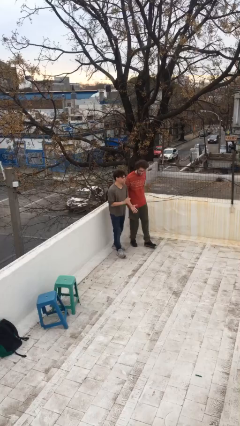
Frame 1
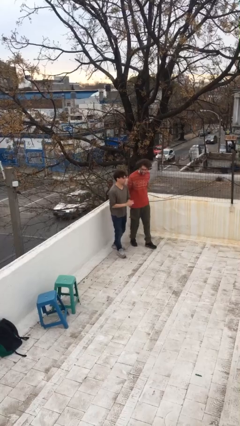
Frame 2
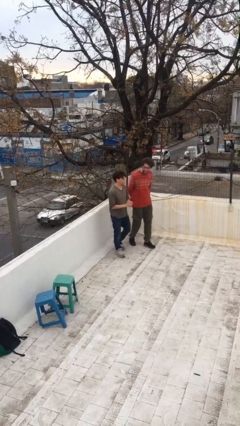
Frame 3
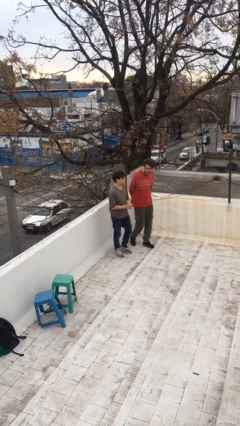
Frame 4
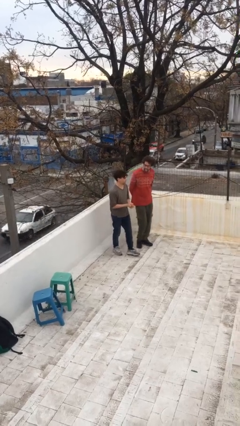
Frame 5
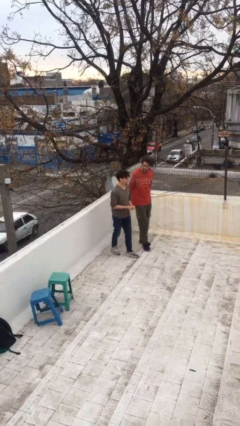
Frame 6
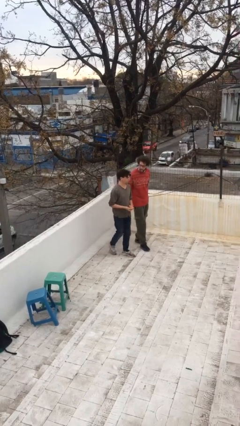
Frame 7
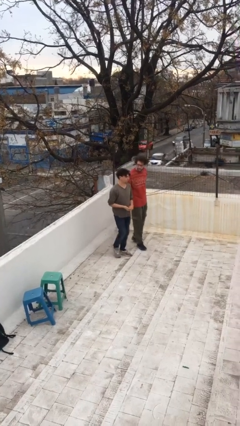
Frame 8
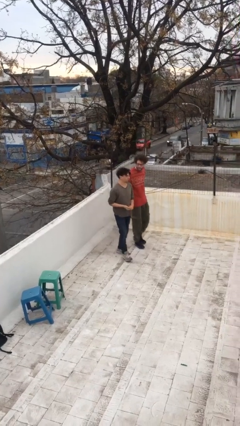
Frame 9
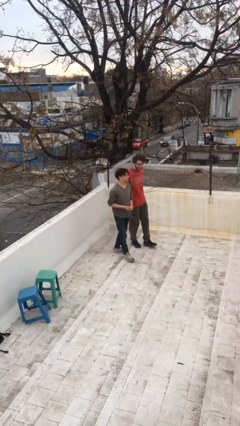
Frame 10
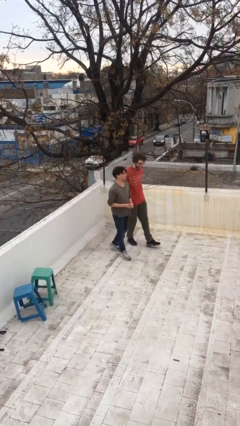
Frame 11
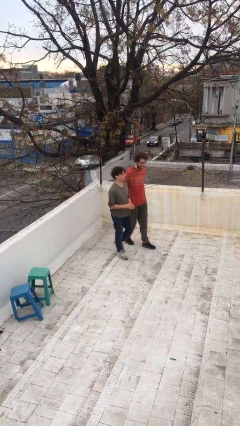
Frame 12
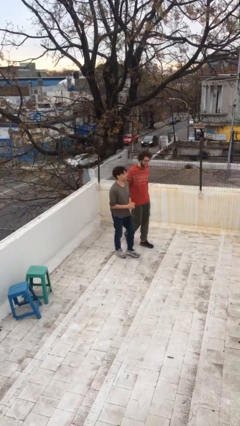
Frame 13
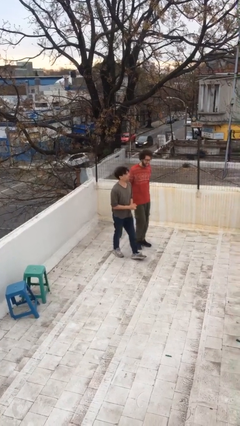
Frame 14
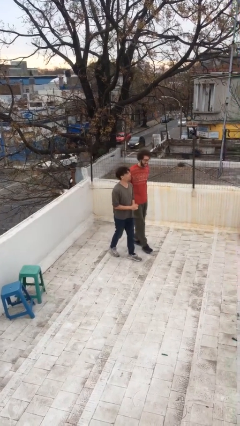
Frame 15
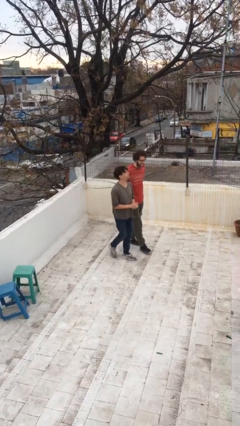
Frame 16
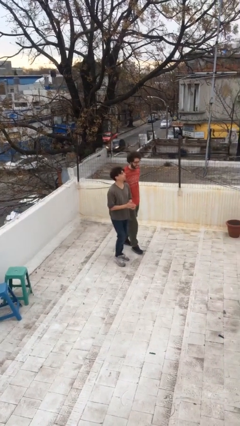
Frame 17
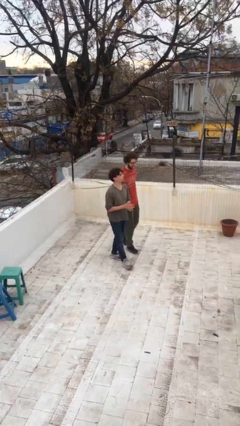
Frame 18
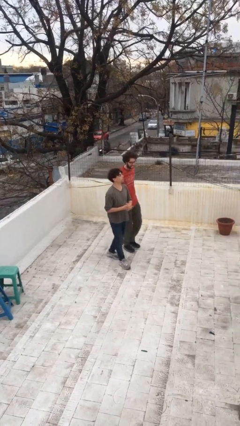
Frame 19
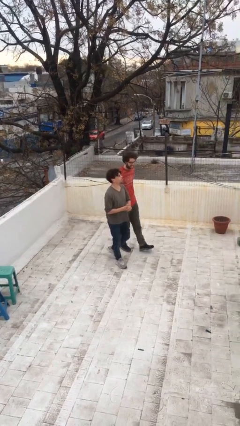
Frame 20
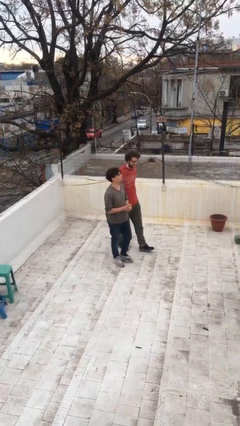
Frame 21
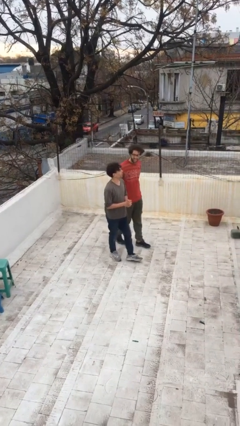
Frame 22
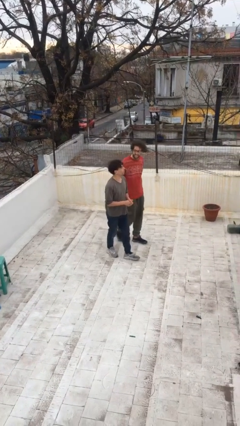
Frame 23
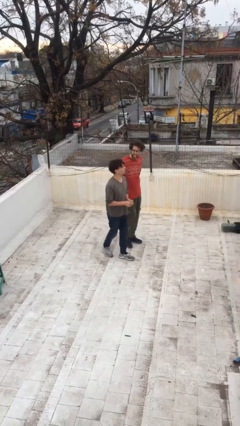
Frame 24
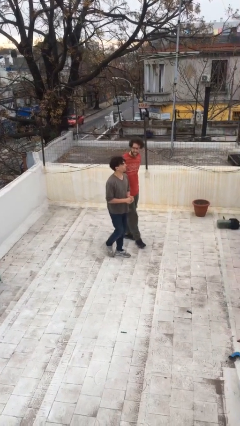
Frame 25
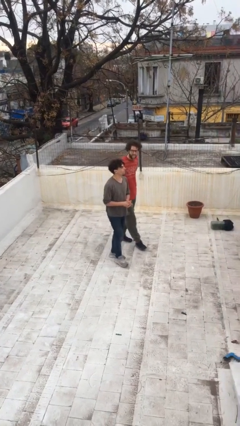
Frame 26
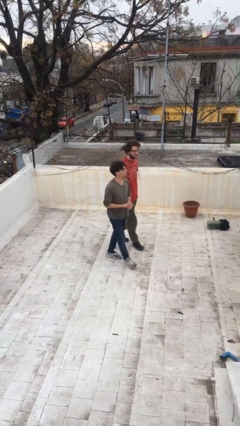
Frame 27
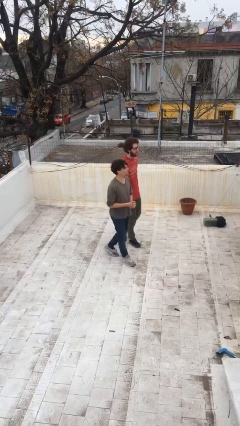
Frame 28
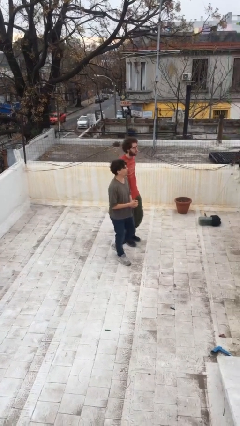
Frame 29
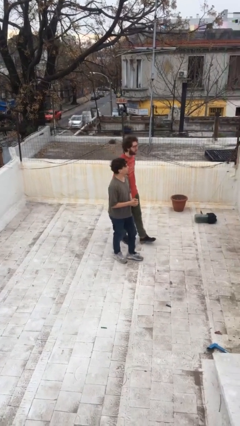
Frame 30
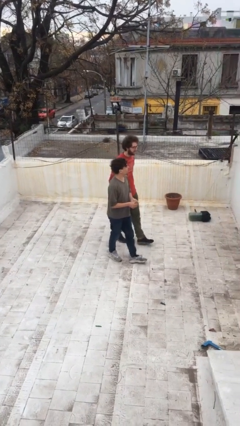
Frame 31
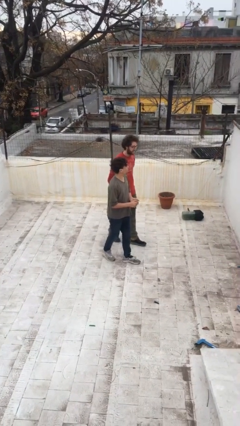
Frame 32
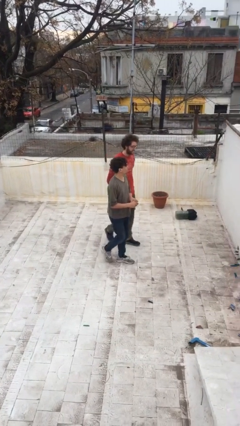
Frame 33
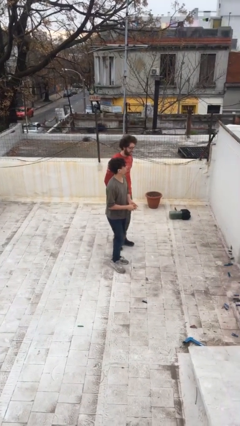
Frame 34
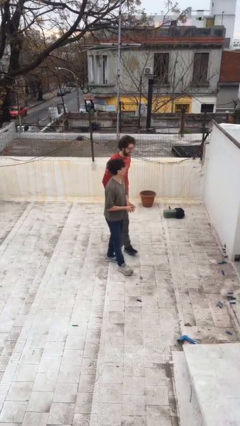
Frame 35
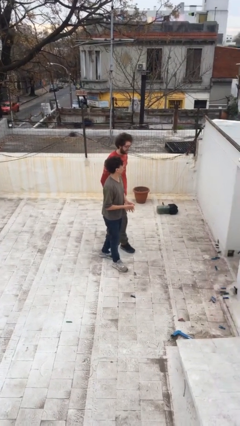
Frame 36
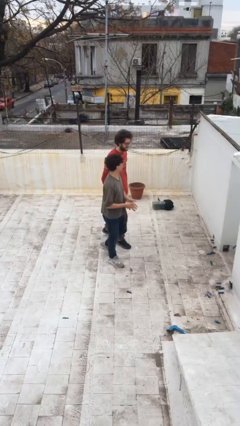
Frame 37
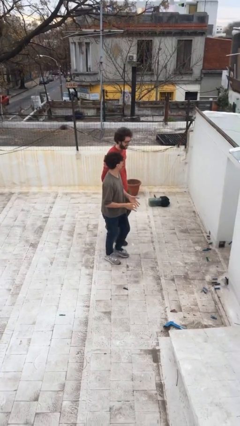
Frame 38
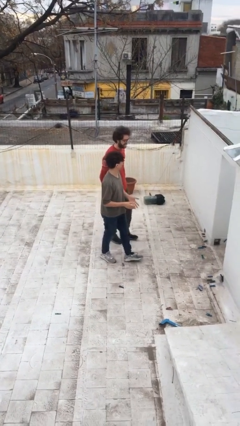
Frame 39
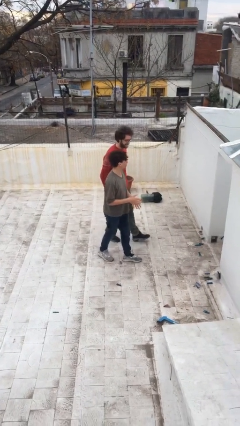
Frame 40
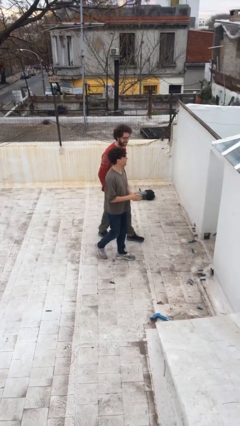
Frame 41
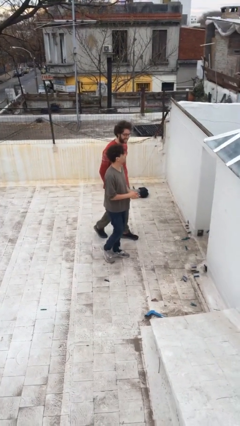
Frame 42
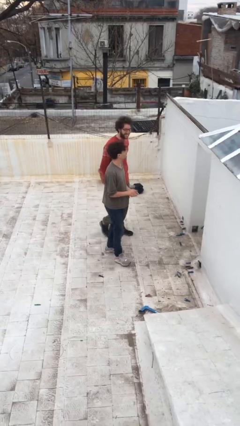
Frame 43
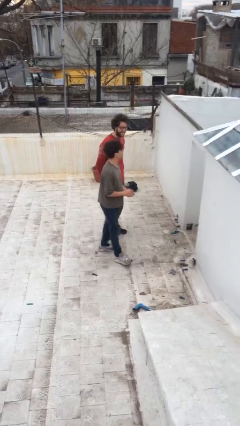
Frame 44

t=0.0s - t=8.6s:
person talks to person

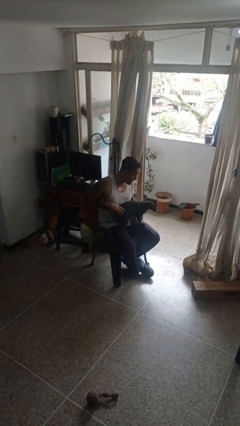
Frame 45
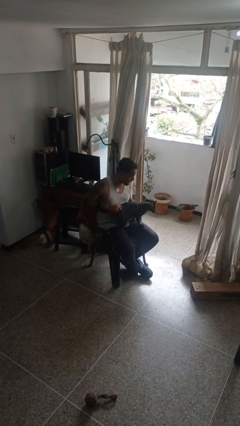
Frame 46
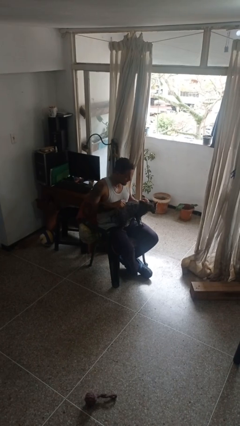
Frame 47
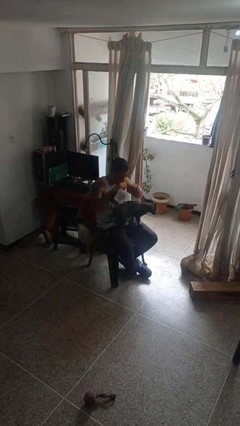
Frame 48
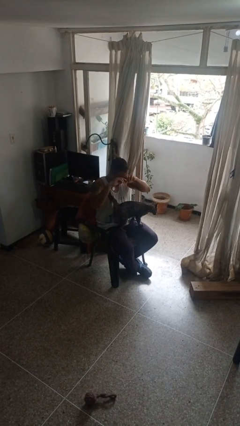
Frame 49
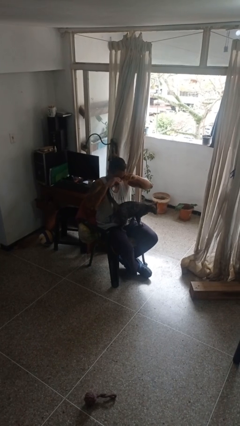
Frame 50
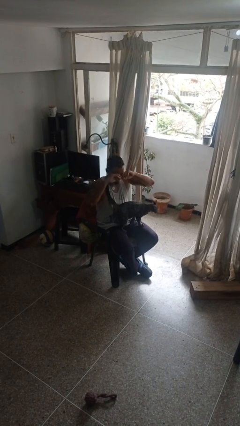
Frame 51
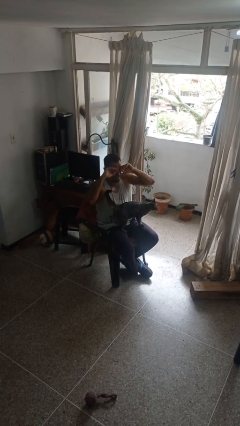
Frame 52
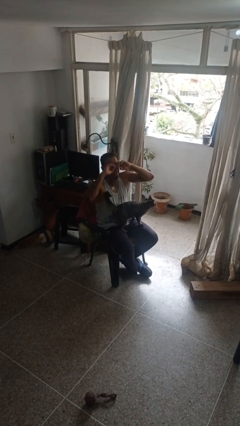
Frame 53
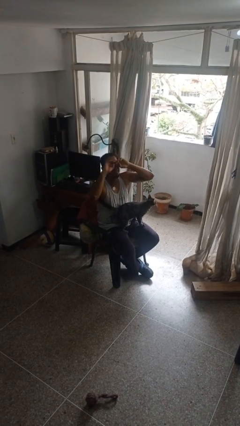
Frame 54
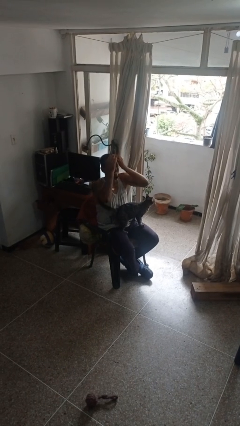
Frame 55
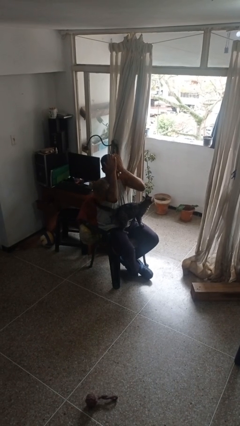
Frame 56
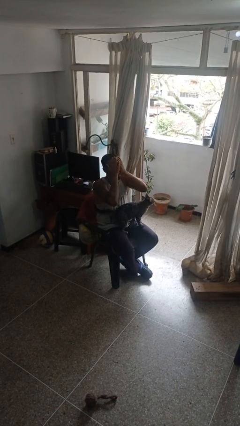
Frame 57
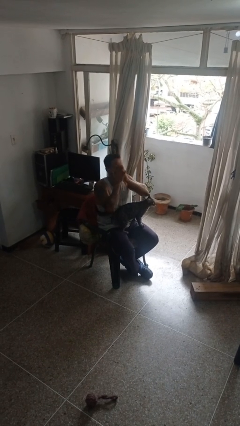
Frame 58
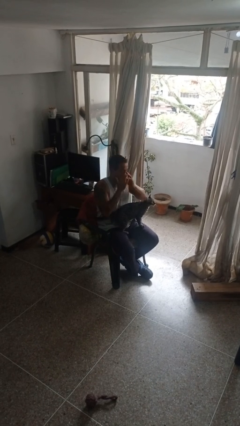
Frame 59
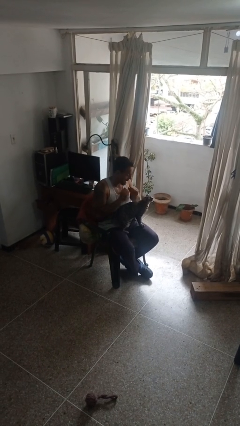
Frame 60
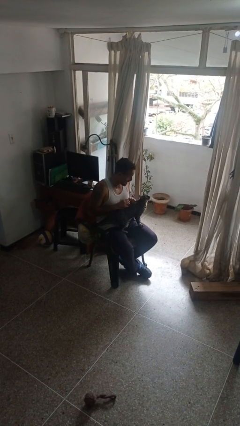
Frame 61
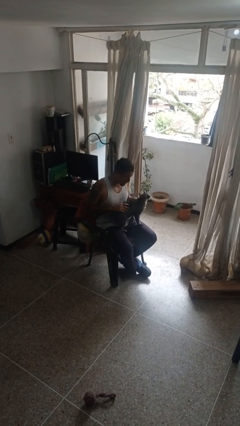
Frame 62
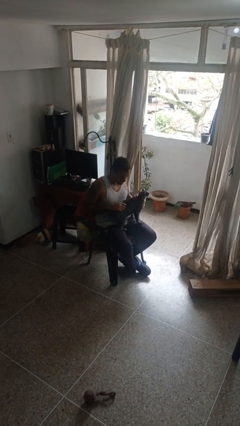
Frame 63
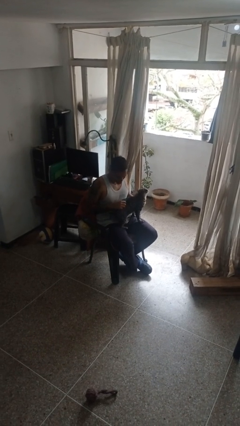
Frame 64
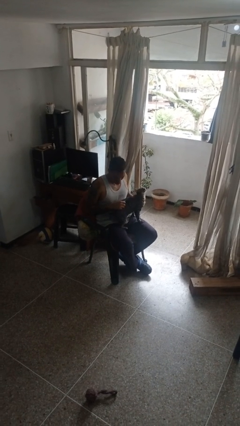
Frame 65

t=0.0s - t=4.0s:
person rubs eyes

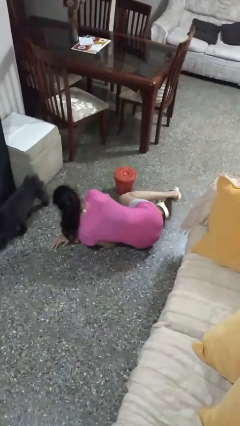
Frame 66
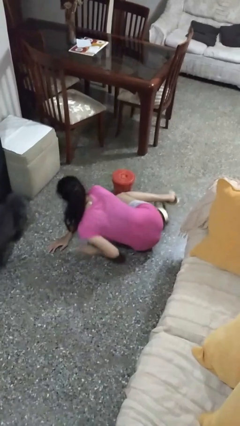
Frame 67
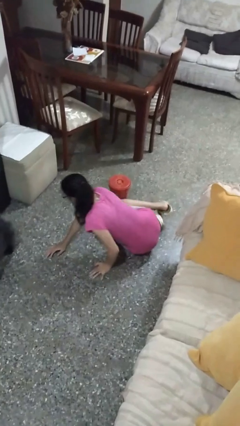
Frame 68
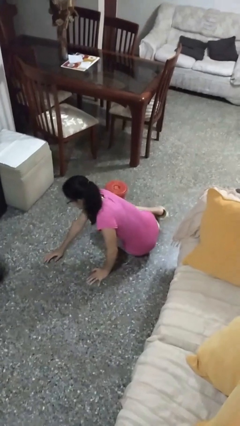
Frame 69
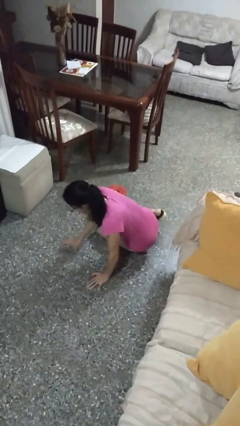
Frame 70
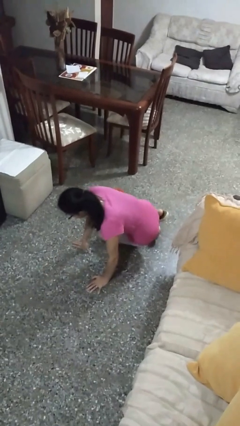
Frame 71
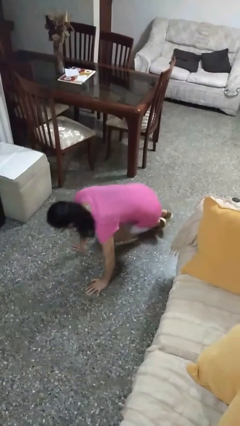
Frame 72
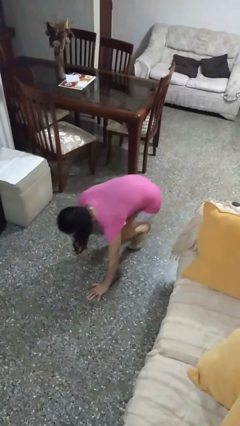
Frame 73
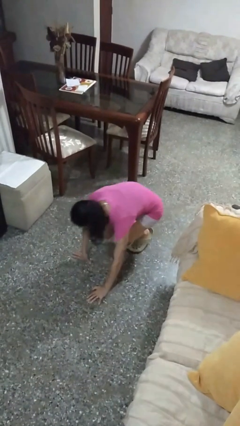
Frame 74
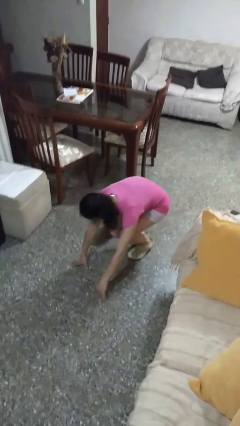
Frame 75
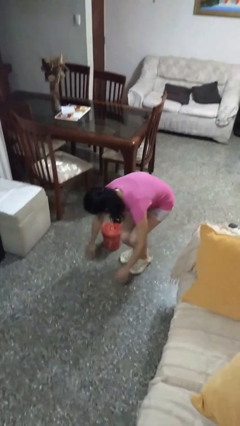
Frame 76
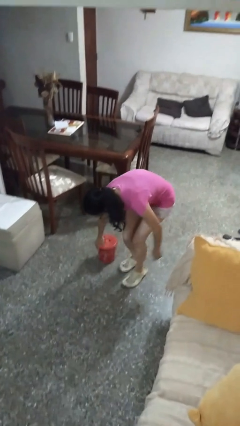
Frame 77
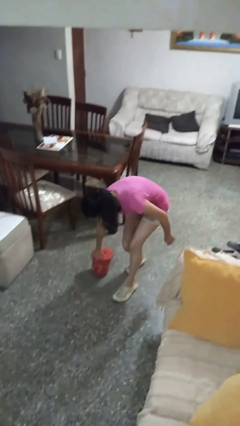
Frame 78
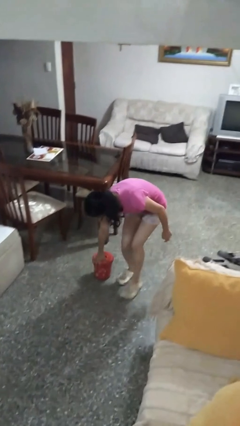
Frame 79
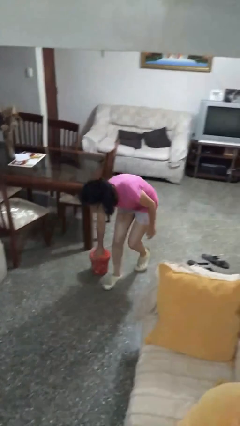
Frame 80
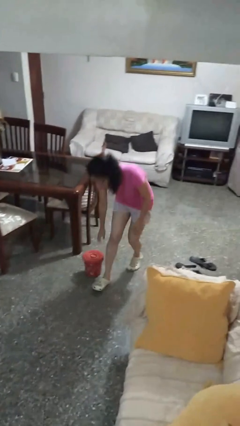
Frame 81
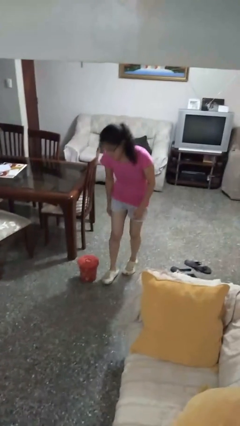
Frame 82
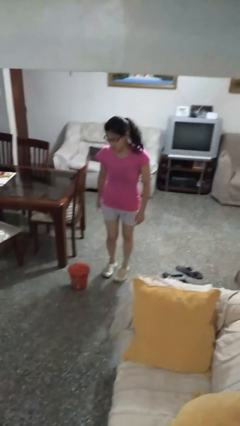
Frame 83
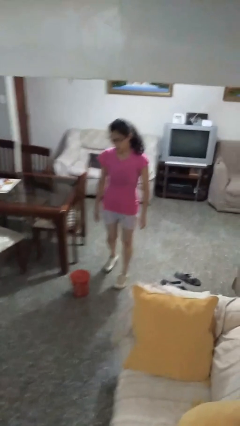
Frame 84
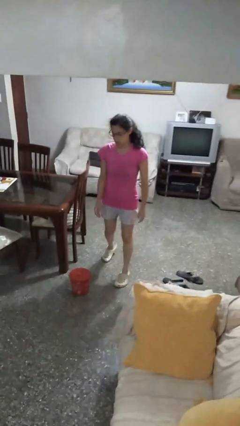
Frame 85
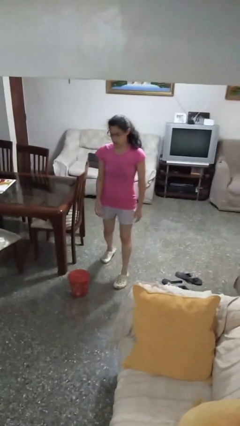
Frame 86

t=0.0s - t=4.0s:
person stands up from floor

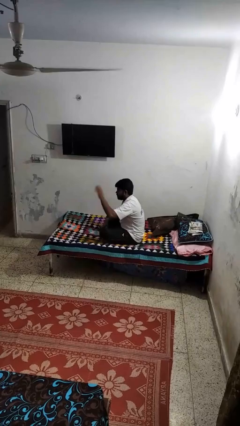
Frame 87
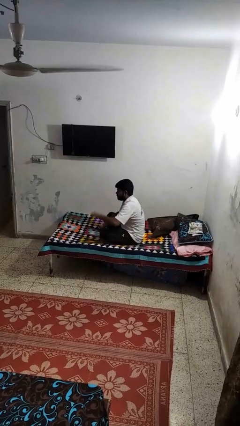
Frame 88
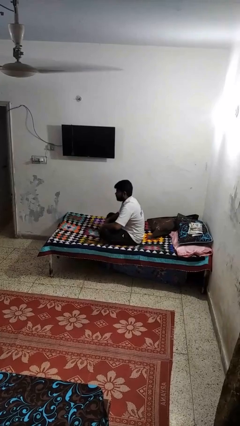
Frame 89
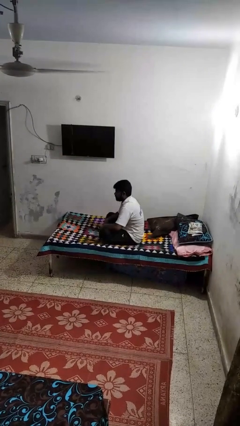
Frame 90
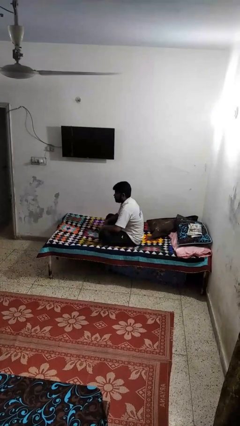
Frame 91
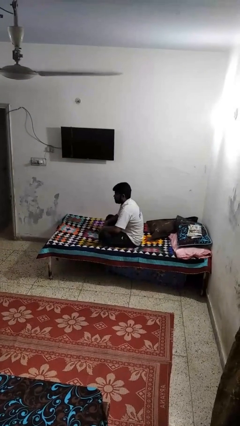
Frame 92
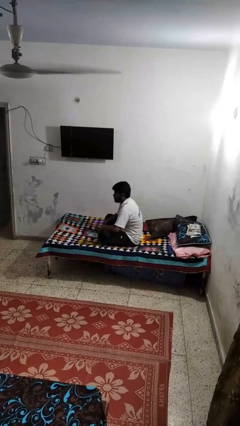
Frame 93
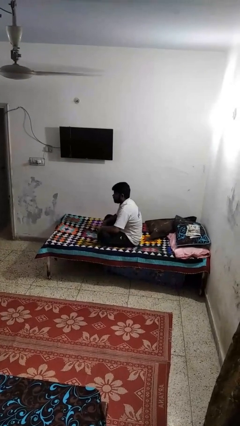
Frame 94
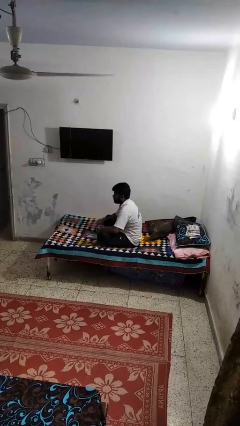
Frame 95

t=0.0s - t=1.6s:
person gestures lower hand
